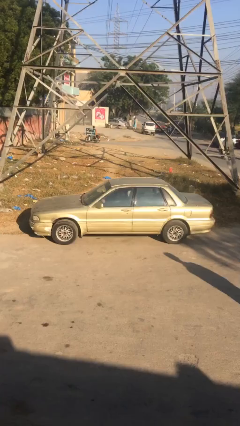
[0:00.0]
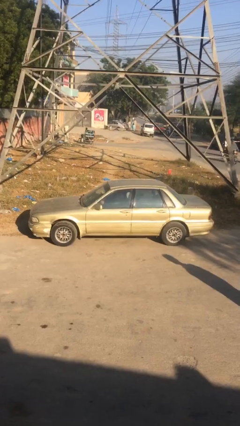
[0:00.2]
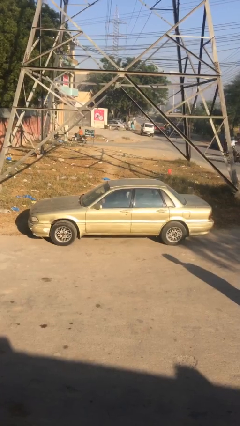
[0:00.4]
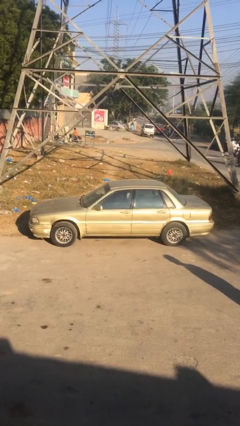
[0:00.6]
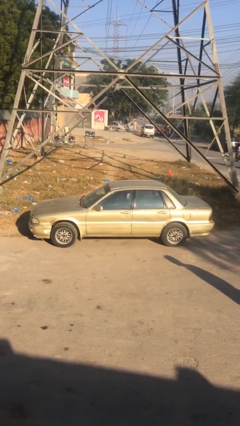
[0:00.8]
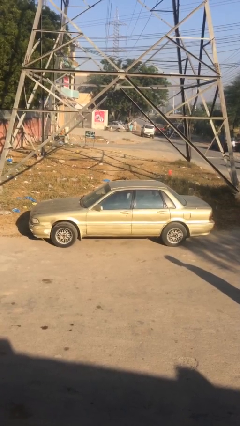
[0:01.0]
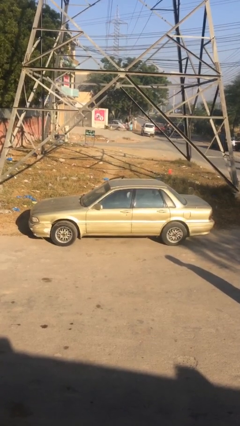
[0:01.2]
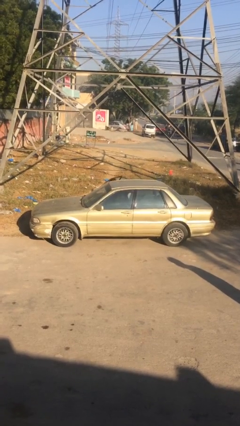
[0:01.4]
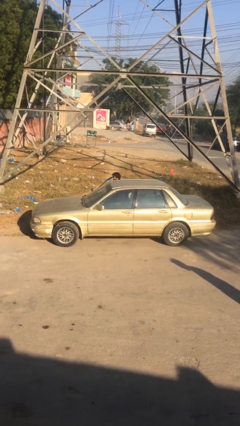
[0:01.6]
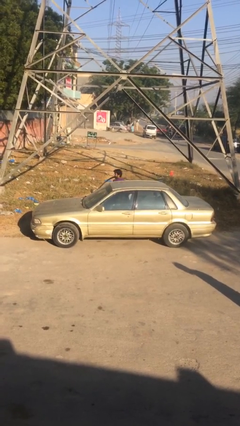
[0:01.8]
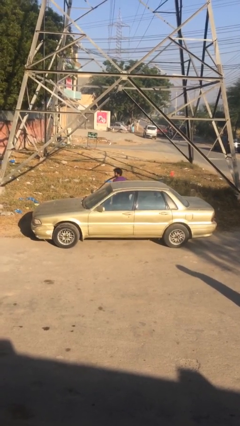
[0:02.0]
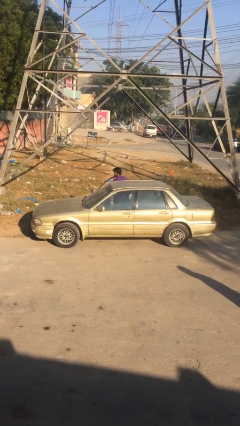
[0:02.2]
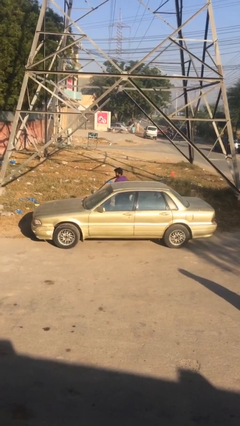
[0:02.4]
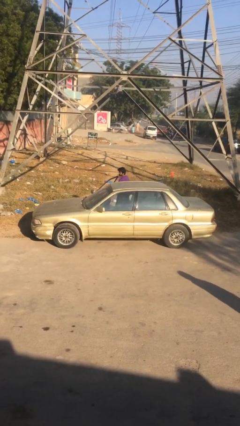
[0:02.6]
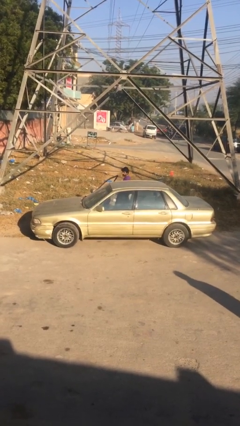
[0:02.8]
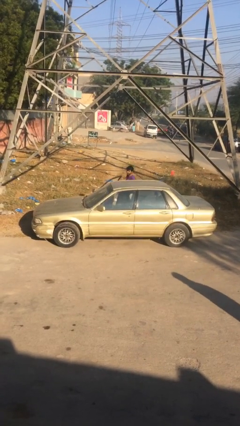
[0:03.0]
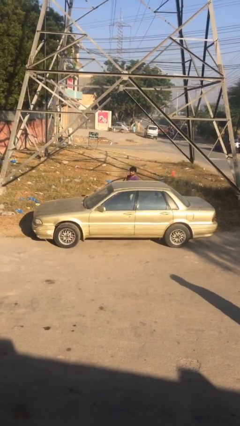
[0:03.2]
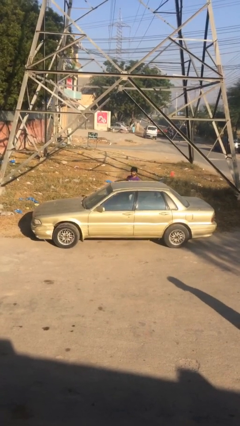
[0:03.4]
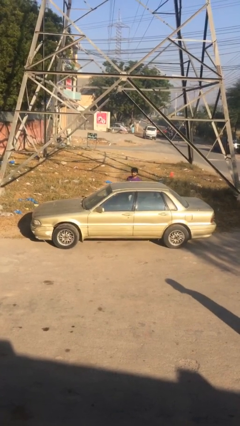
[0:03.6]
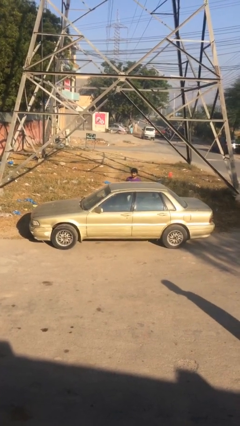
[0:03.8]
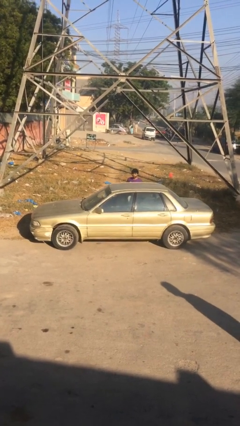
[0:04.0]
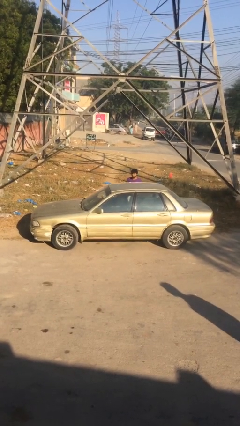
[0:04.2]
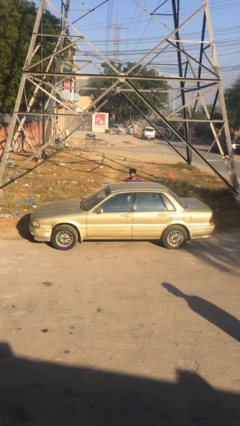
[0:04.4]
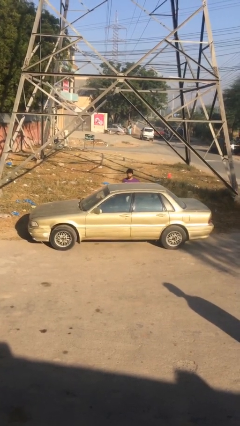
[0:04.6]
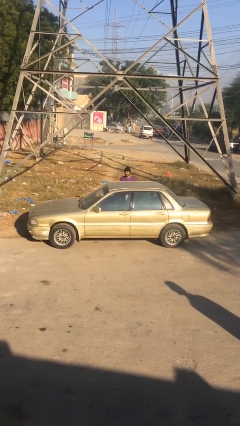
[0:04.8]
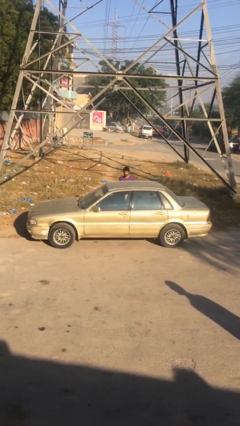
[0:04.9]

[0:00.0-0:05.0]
car drops off person

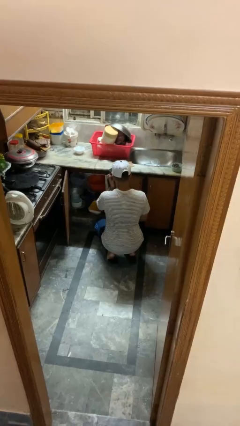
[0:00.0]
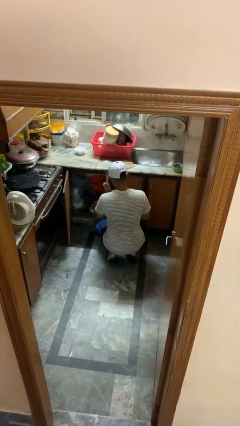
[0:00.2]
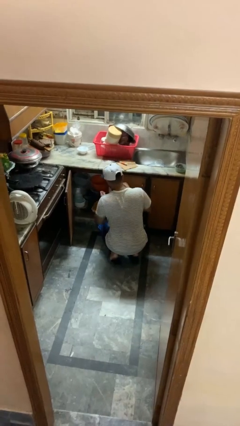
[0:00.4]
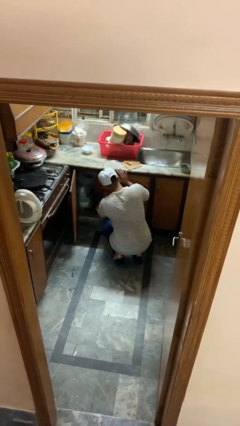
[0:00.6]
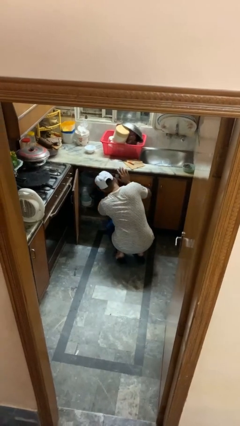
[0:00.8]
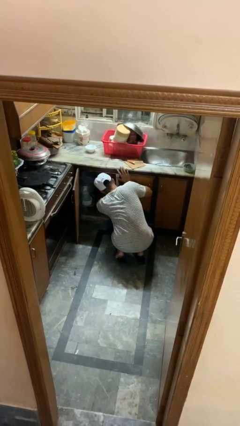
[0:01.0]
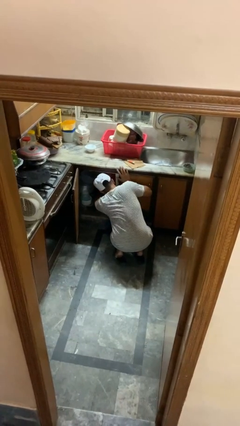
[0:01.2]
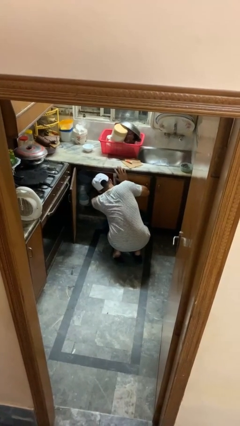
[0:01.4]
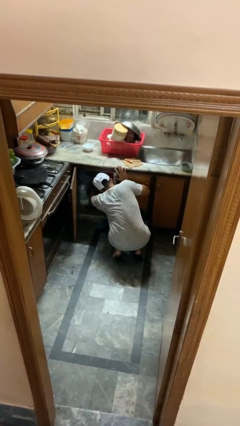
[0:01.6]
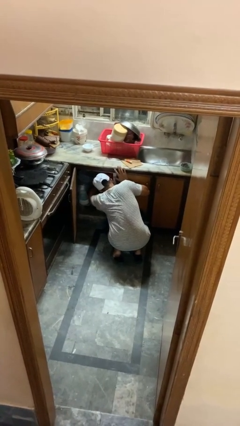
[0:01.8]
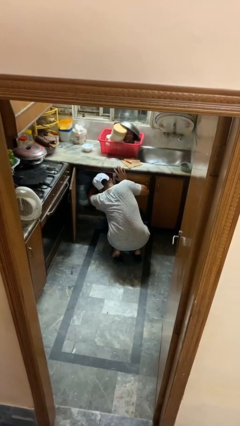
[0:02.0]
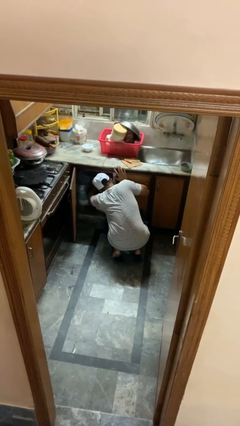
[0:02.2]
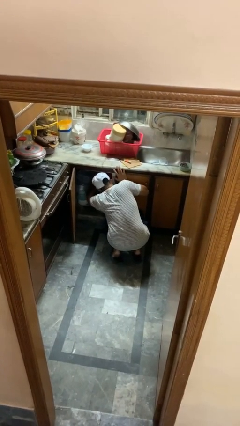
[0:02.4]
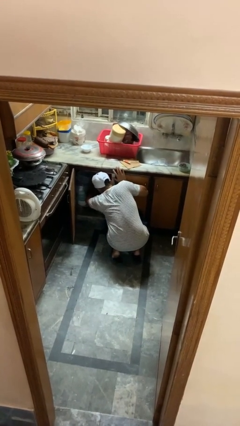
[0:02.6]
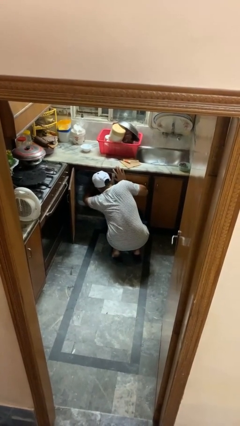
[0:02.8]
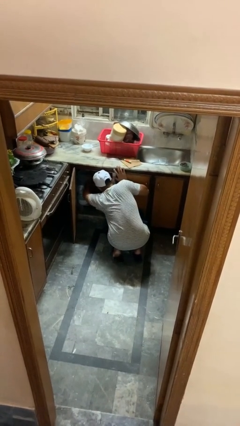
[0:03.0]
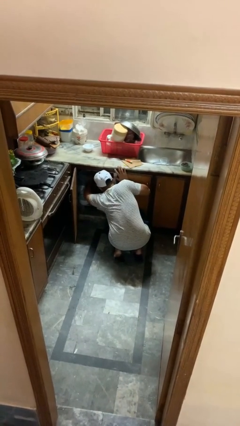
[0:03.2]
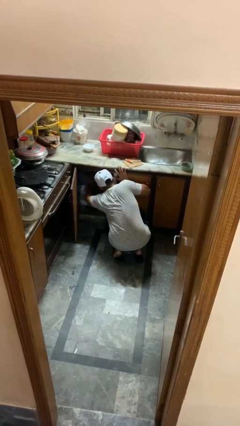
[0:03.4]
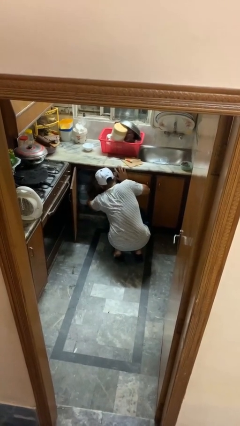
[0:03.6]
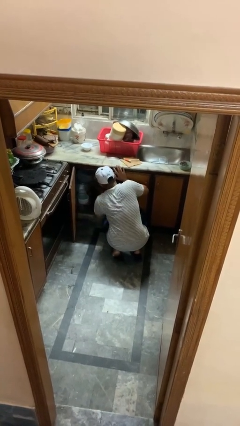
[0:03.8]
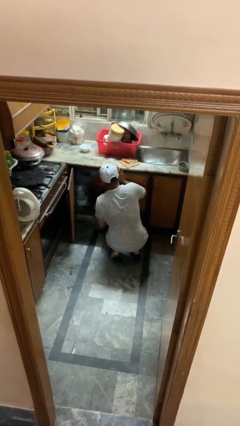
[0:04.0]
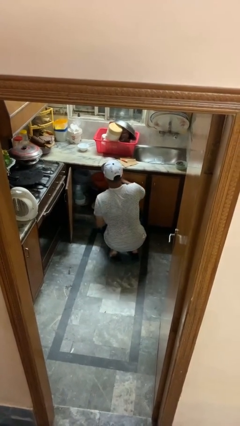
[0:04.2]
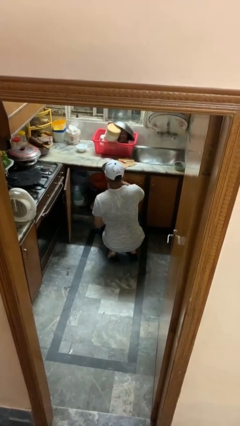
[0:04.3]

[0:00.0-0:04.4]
person searches in kitchen drawer

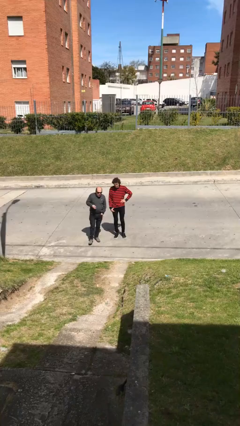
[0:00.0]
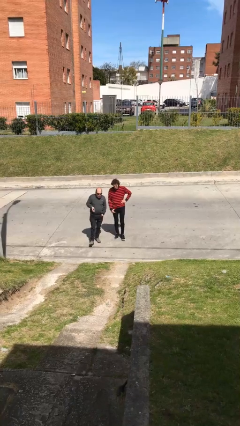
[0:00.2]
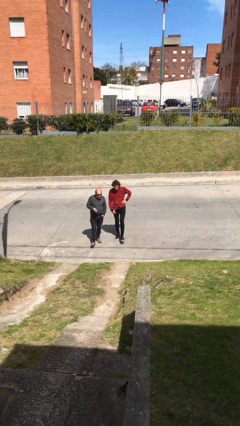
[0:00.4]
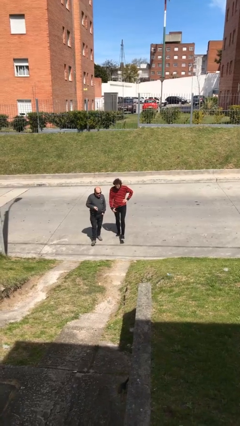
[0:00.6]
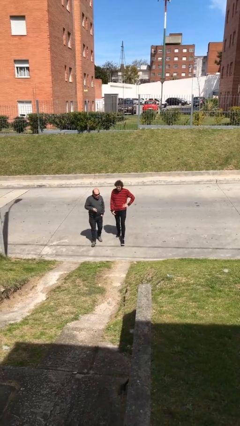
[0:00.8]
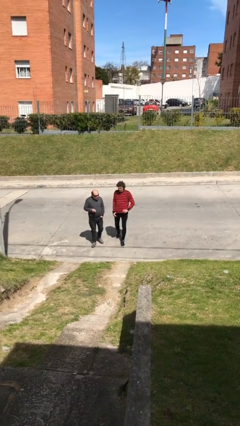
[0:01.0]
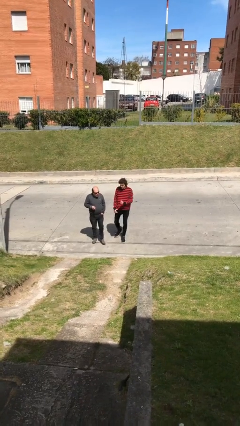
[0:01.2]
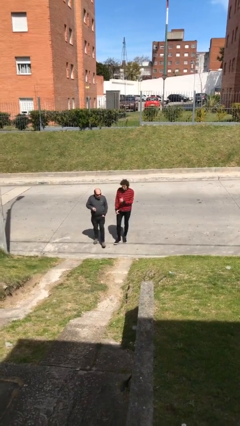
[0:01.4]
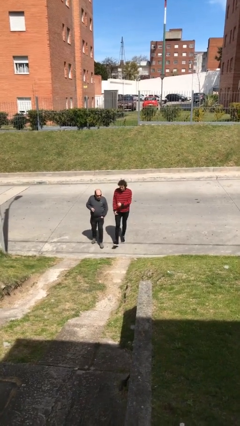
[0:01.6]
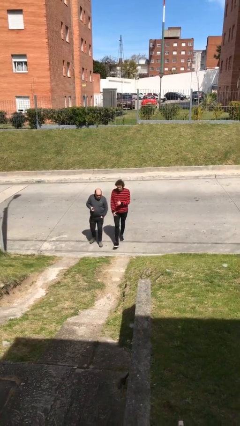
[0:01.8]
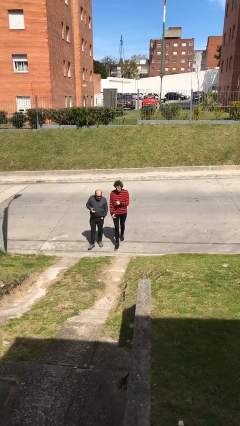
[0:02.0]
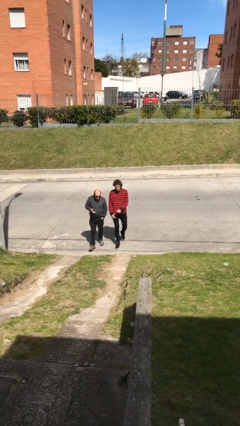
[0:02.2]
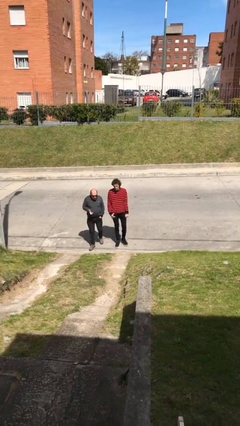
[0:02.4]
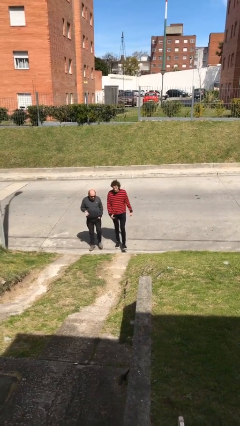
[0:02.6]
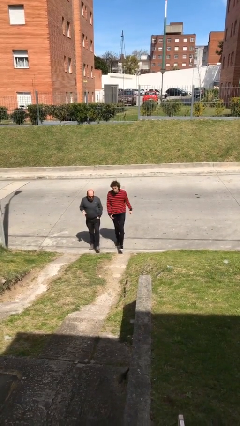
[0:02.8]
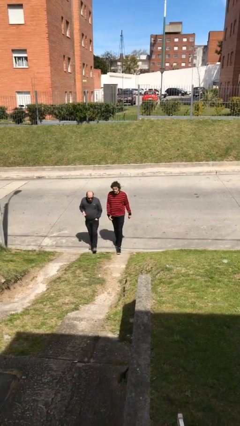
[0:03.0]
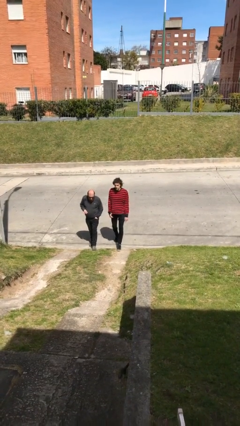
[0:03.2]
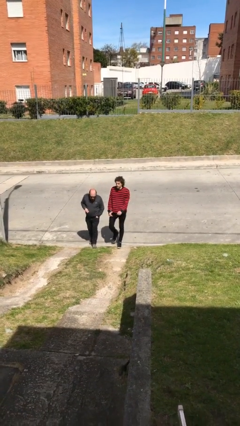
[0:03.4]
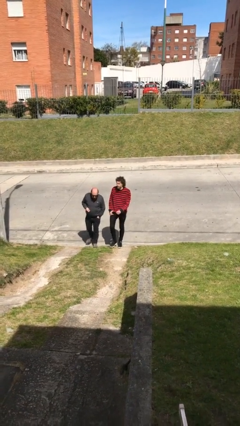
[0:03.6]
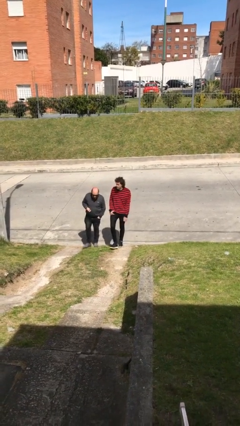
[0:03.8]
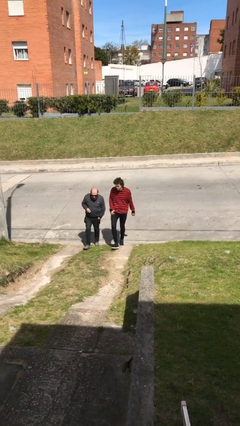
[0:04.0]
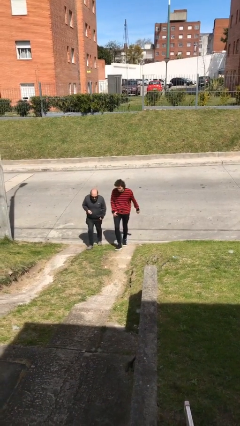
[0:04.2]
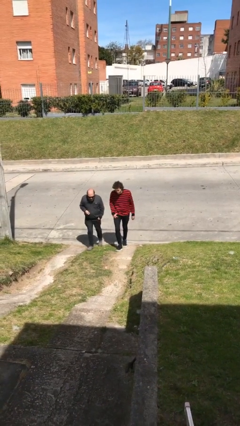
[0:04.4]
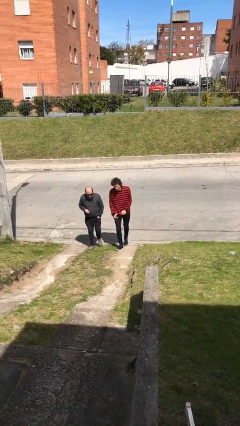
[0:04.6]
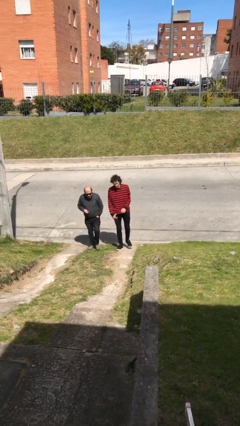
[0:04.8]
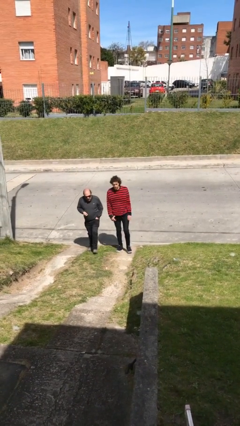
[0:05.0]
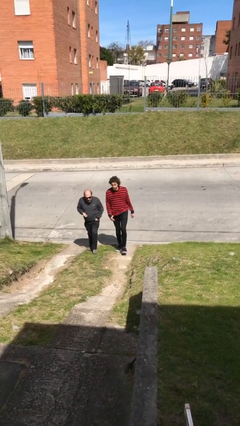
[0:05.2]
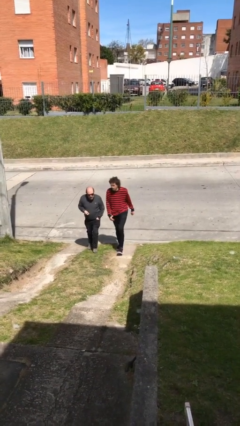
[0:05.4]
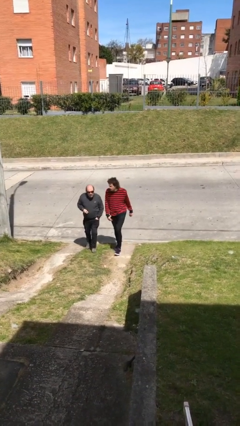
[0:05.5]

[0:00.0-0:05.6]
person talks to person

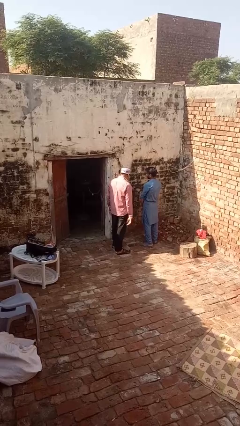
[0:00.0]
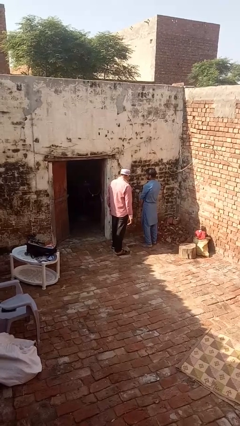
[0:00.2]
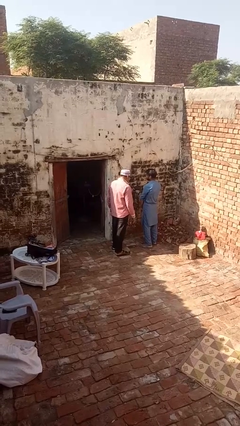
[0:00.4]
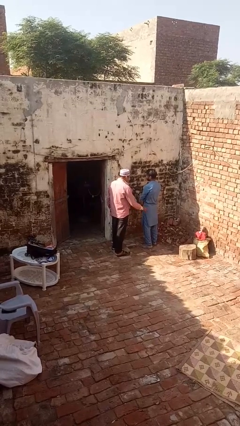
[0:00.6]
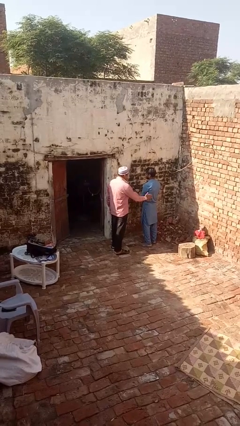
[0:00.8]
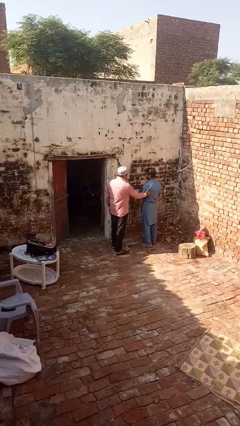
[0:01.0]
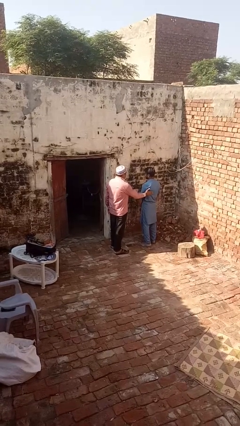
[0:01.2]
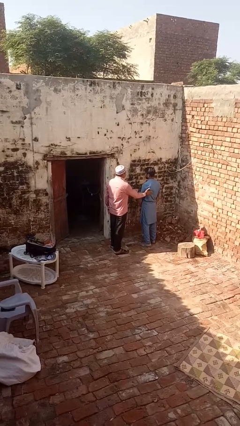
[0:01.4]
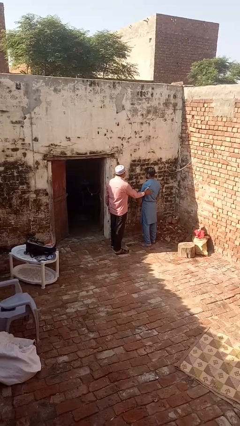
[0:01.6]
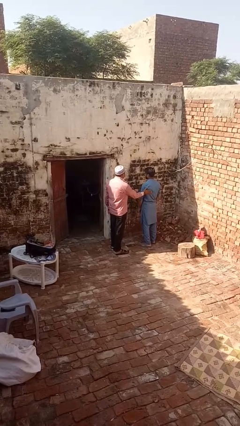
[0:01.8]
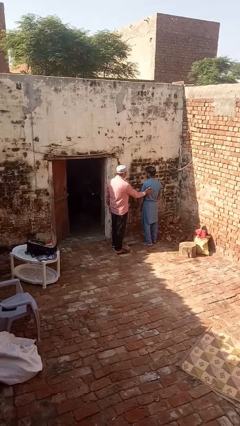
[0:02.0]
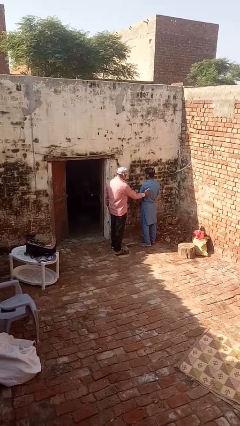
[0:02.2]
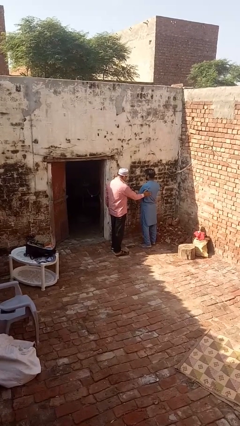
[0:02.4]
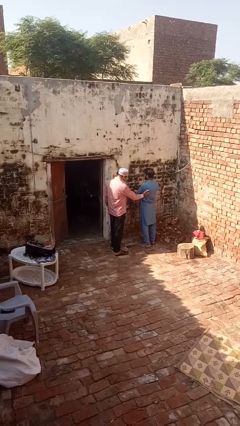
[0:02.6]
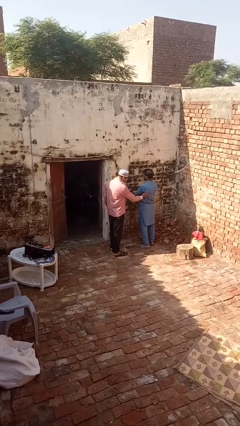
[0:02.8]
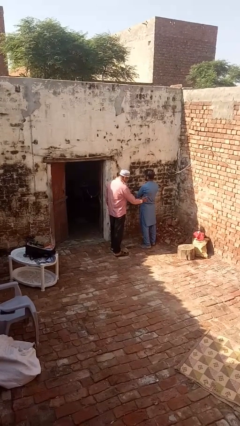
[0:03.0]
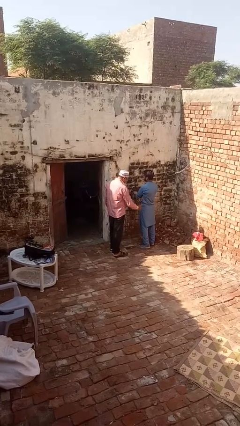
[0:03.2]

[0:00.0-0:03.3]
person shoves person
